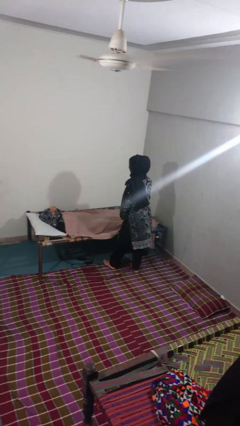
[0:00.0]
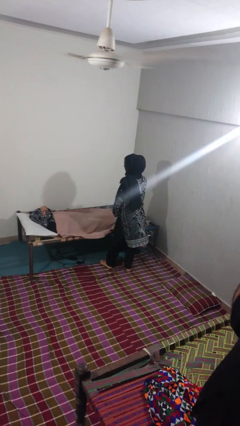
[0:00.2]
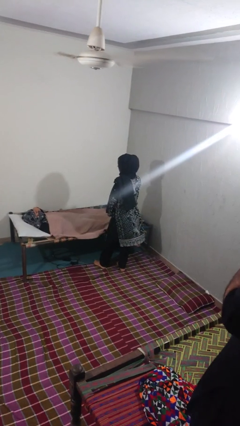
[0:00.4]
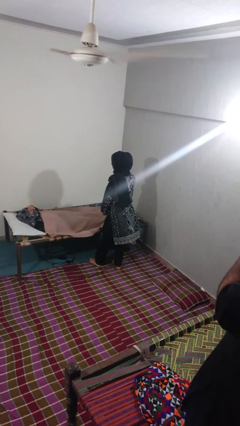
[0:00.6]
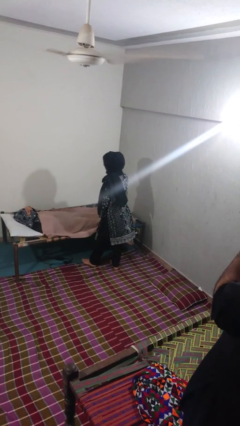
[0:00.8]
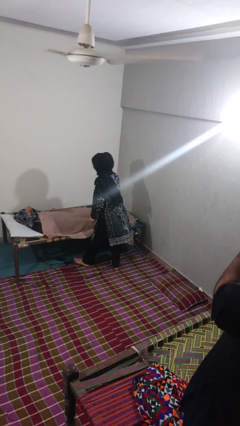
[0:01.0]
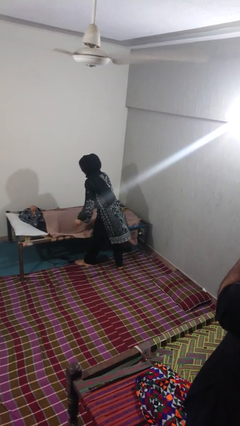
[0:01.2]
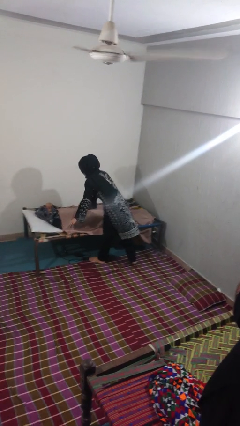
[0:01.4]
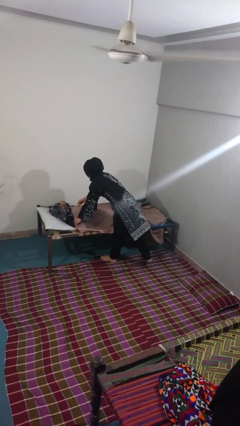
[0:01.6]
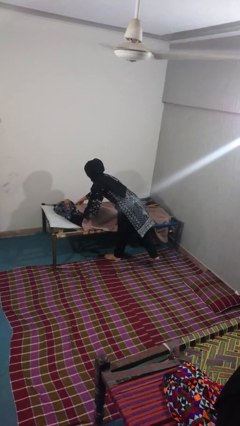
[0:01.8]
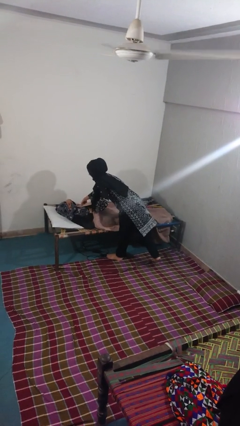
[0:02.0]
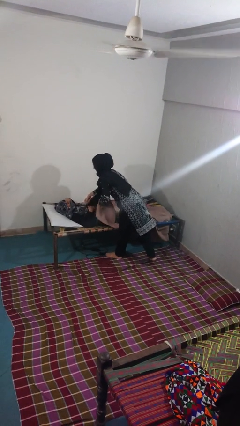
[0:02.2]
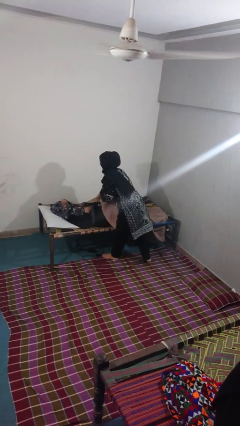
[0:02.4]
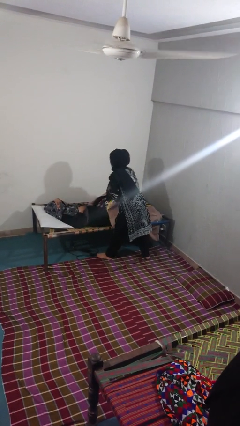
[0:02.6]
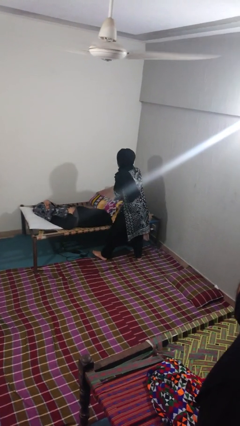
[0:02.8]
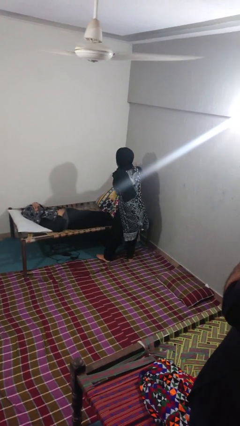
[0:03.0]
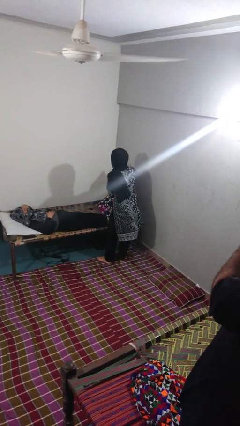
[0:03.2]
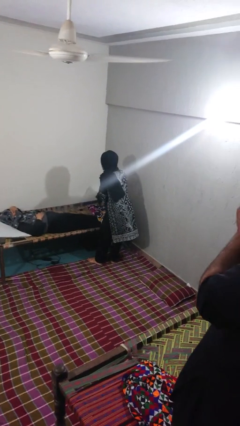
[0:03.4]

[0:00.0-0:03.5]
person uncovers friend with blanket

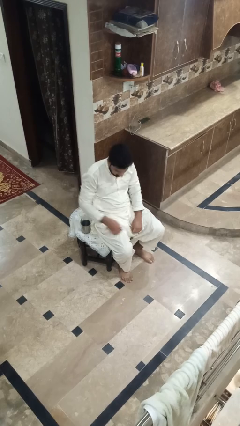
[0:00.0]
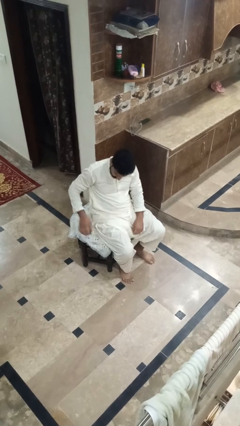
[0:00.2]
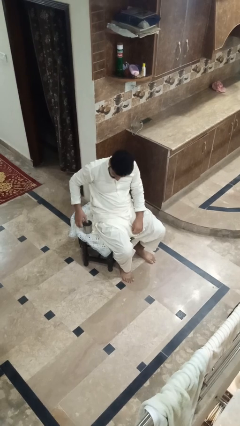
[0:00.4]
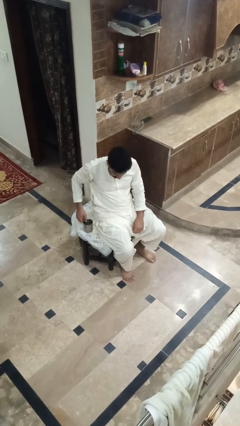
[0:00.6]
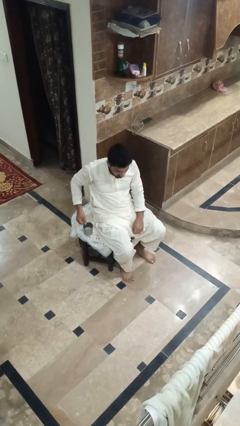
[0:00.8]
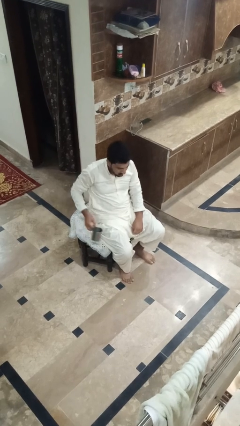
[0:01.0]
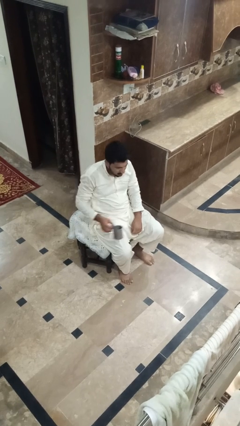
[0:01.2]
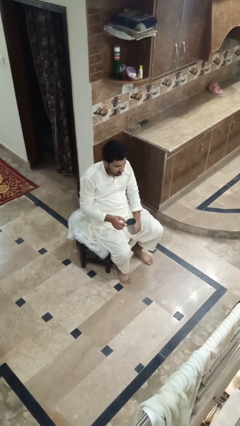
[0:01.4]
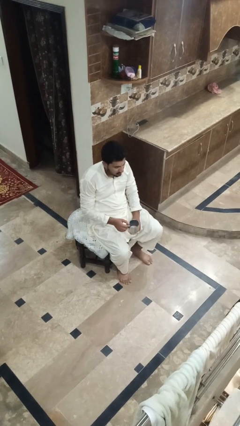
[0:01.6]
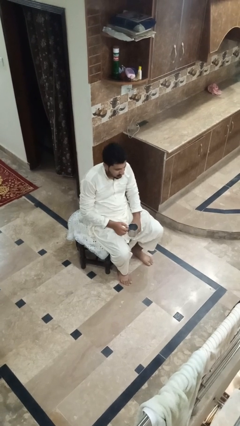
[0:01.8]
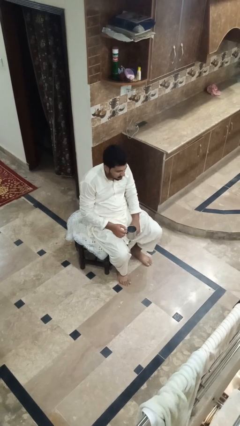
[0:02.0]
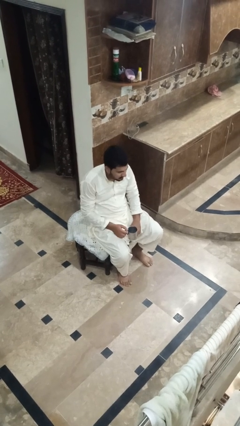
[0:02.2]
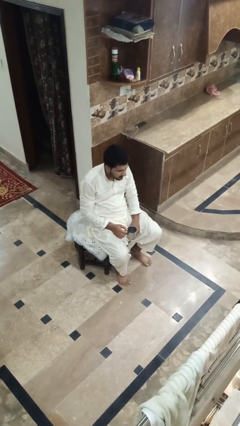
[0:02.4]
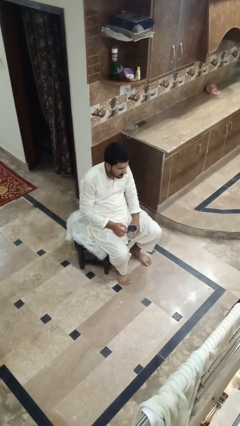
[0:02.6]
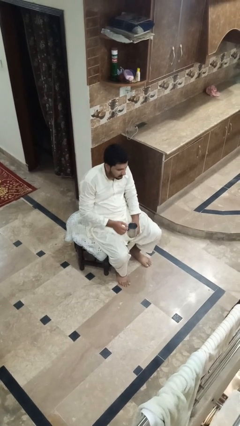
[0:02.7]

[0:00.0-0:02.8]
person picks up object from table

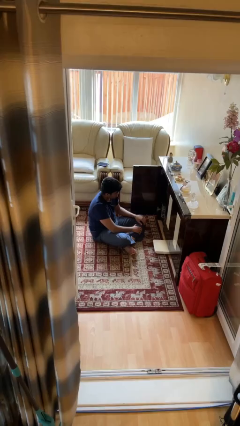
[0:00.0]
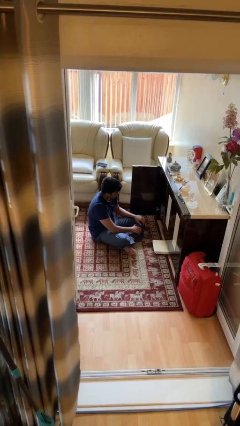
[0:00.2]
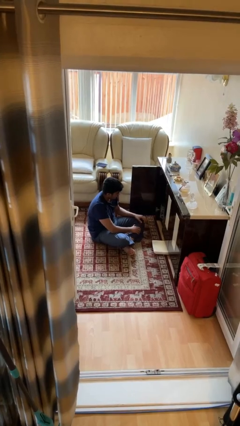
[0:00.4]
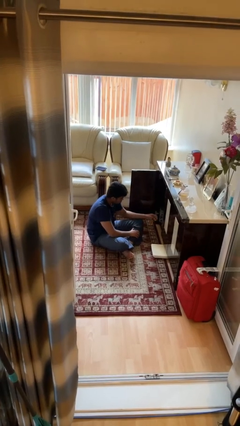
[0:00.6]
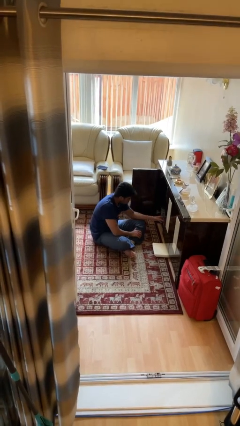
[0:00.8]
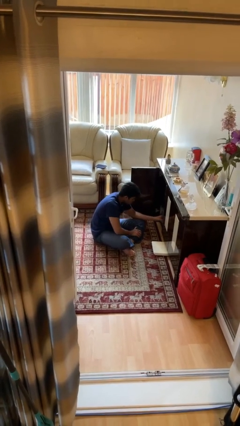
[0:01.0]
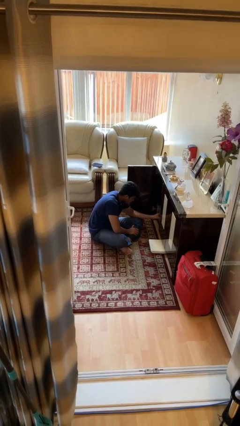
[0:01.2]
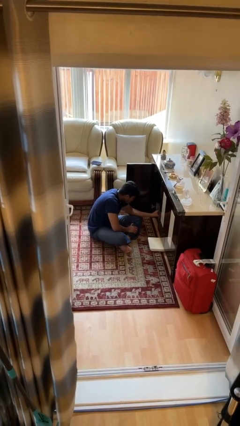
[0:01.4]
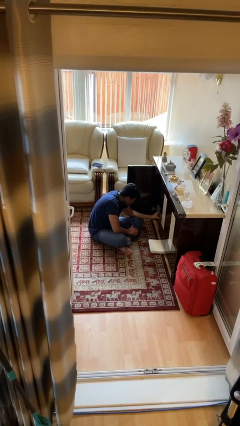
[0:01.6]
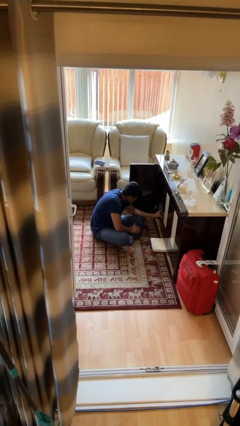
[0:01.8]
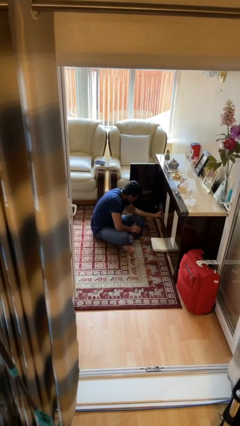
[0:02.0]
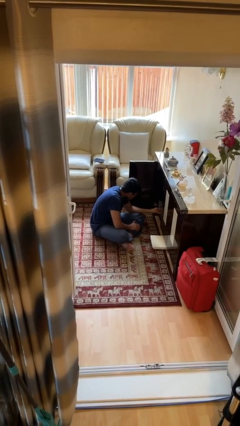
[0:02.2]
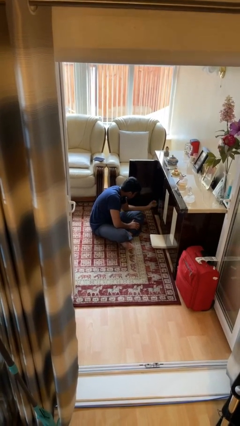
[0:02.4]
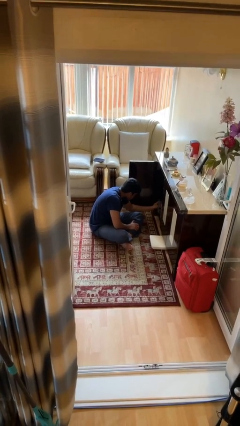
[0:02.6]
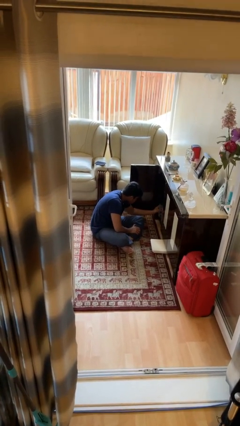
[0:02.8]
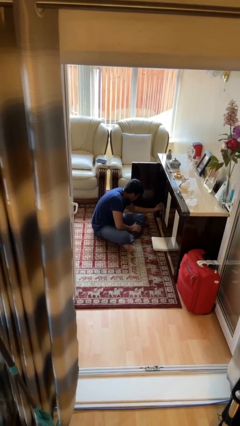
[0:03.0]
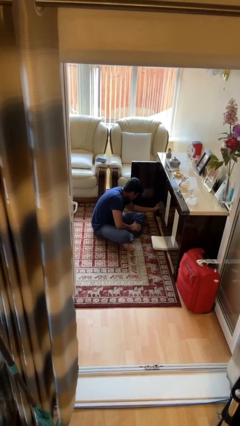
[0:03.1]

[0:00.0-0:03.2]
person searches in cabinet

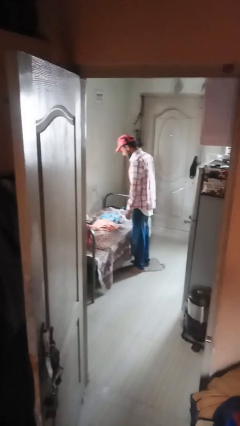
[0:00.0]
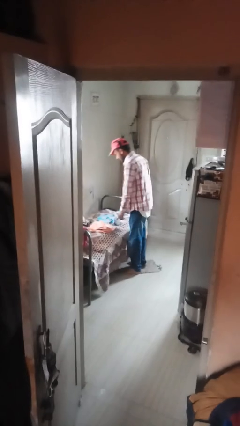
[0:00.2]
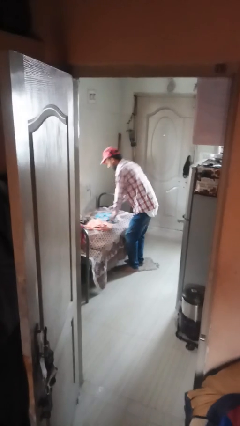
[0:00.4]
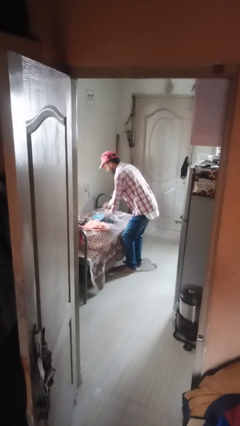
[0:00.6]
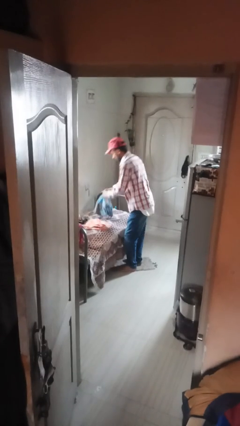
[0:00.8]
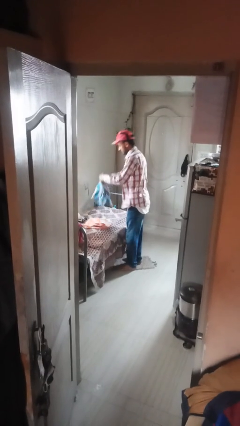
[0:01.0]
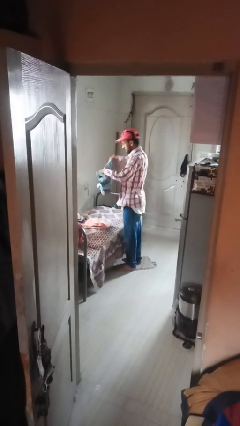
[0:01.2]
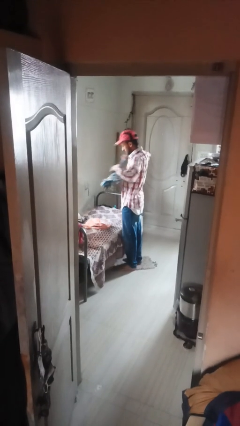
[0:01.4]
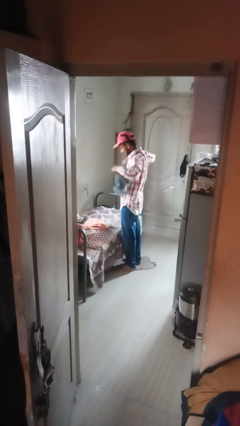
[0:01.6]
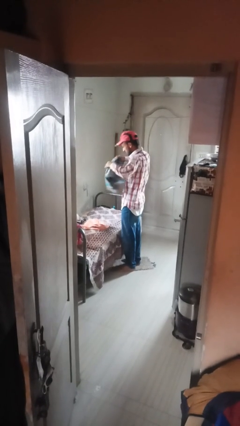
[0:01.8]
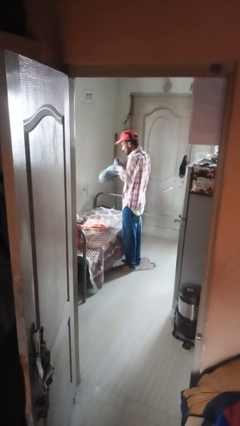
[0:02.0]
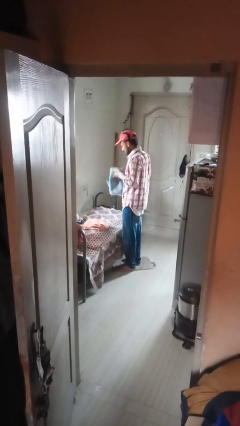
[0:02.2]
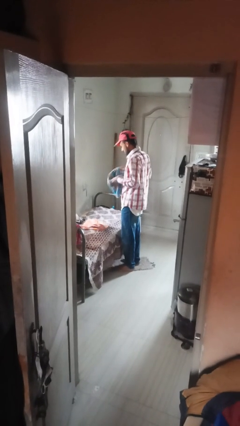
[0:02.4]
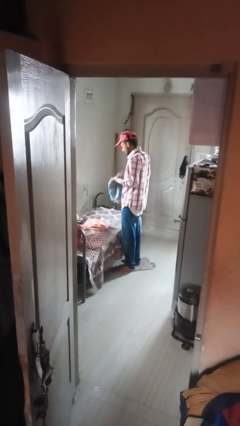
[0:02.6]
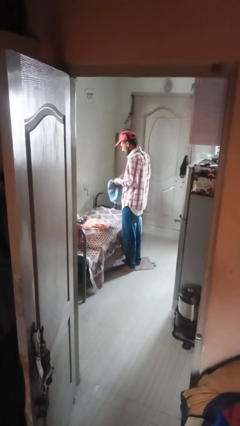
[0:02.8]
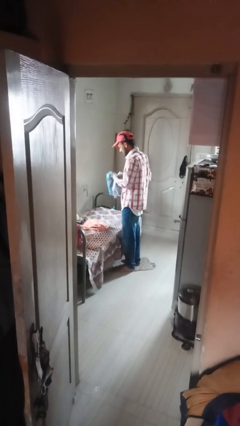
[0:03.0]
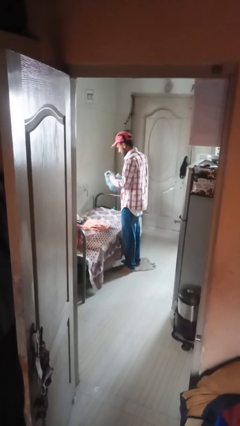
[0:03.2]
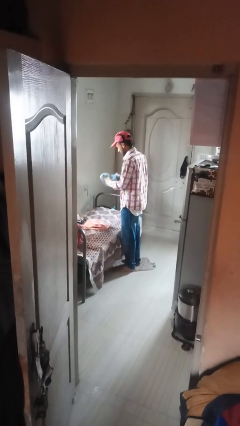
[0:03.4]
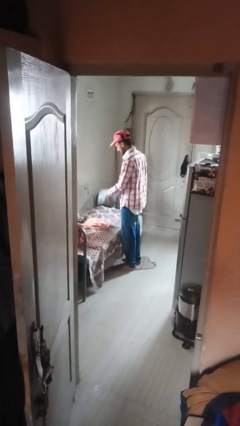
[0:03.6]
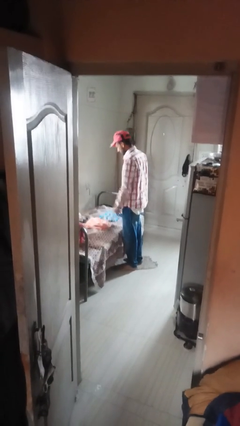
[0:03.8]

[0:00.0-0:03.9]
person folds towel

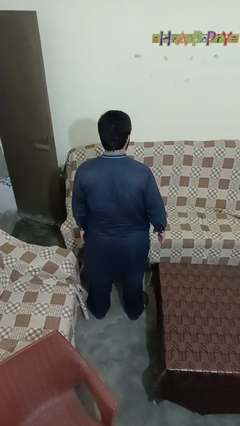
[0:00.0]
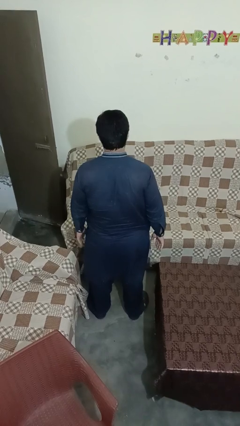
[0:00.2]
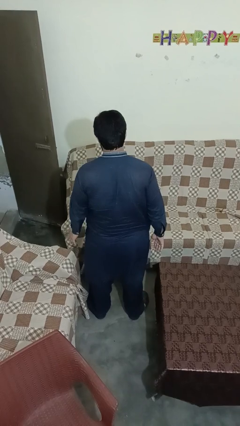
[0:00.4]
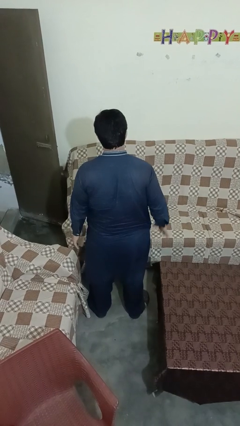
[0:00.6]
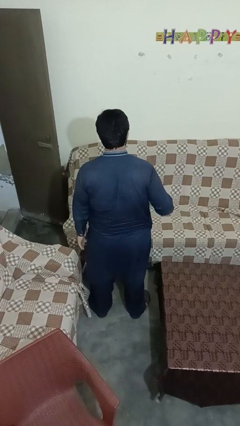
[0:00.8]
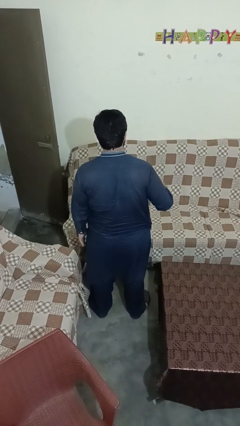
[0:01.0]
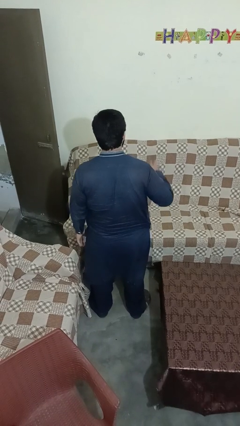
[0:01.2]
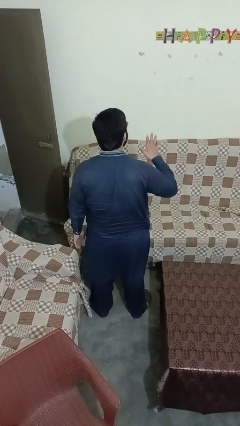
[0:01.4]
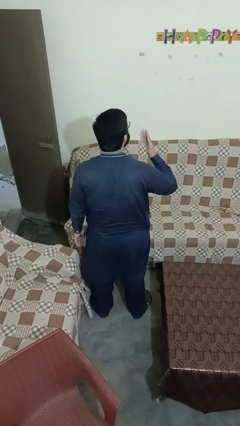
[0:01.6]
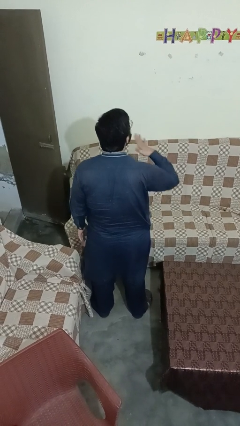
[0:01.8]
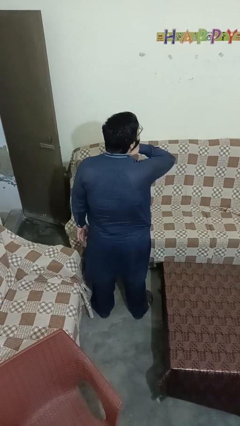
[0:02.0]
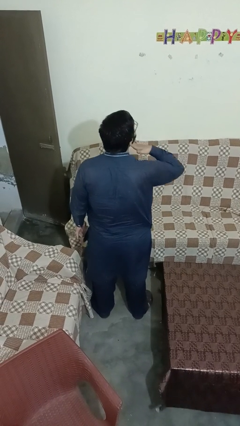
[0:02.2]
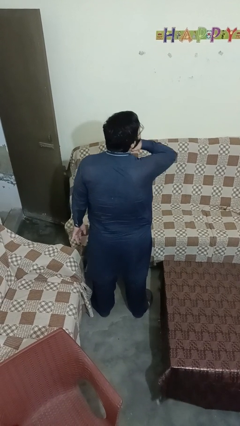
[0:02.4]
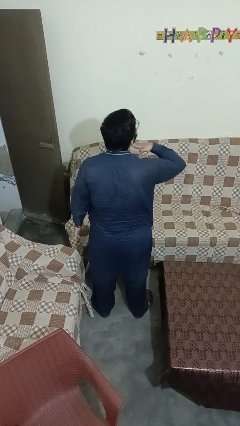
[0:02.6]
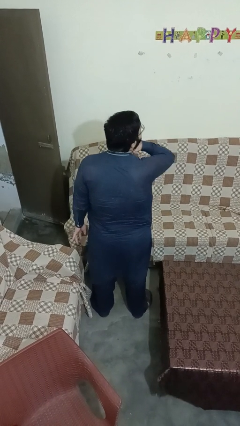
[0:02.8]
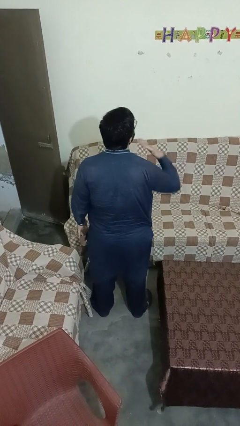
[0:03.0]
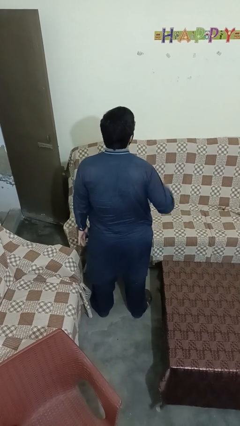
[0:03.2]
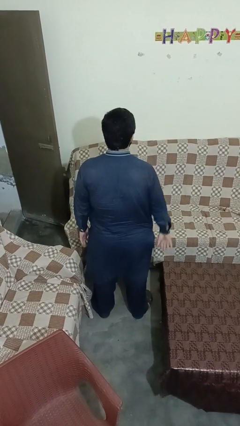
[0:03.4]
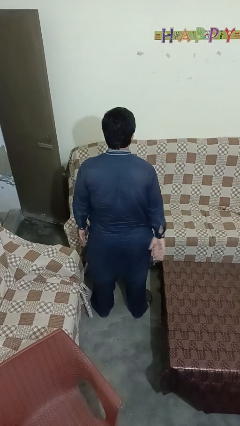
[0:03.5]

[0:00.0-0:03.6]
person gestures cut

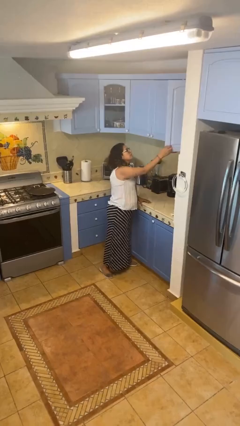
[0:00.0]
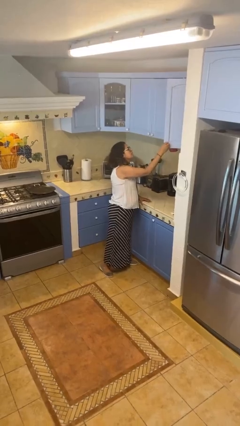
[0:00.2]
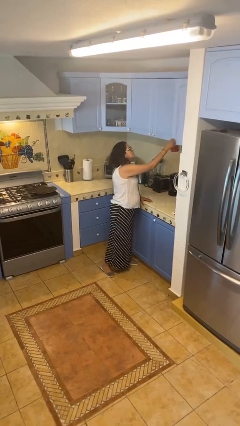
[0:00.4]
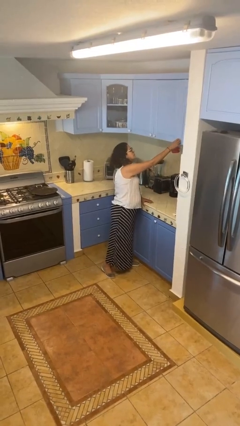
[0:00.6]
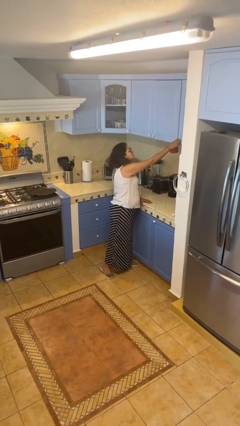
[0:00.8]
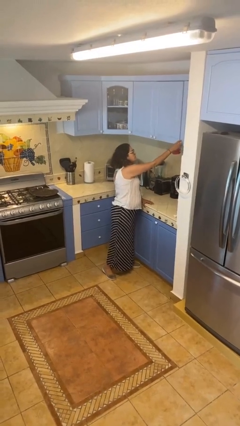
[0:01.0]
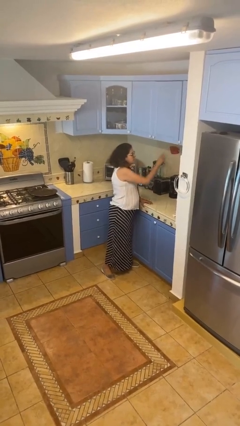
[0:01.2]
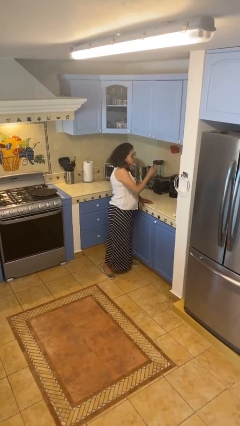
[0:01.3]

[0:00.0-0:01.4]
person closes cabinet
